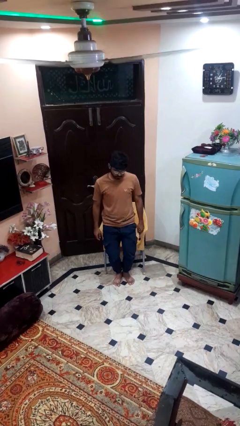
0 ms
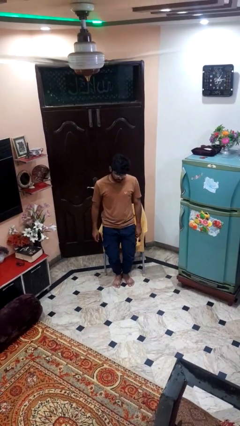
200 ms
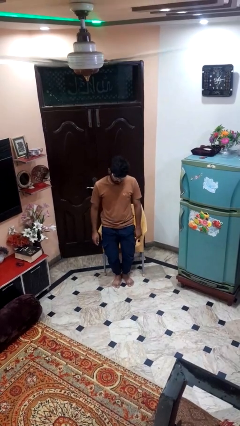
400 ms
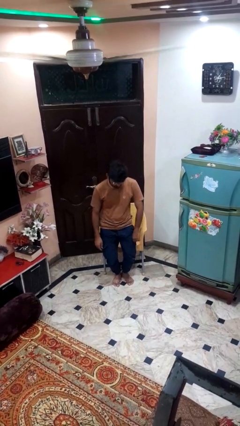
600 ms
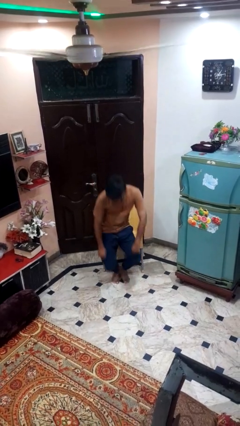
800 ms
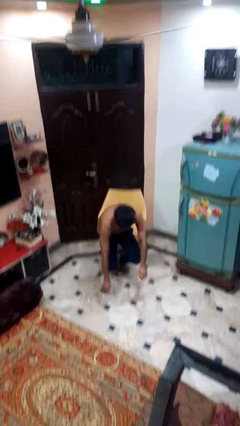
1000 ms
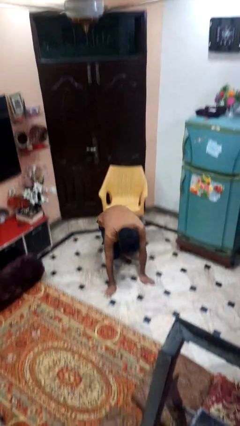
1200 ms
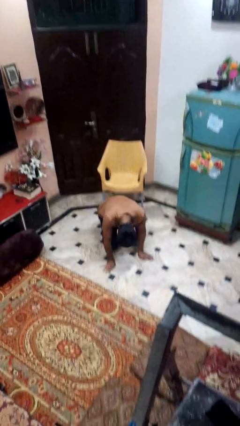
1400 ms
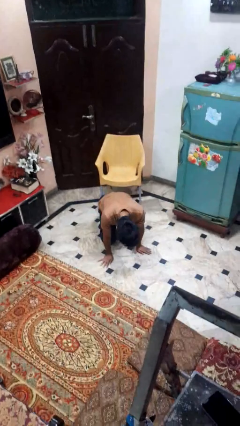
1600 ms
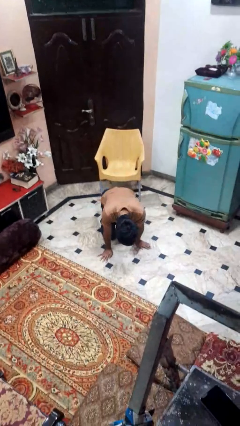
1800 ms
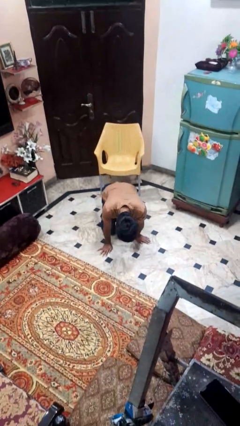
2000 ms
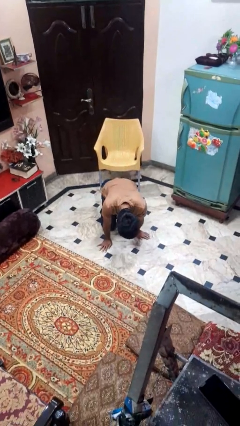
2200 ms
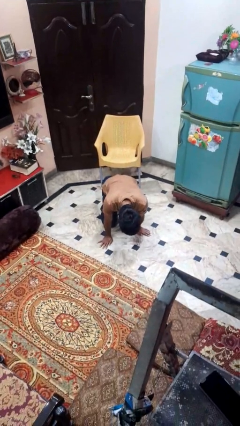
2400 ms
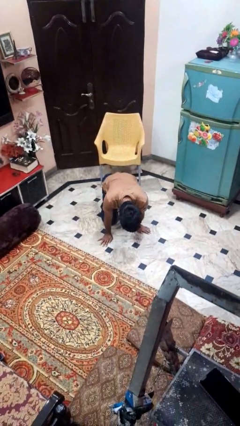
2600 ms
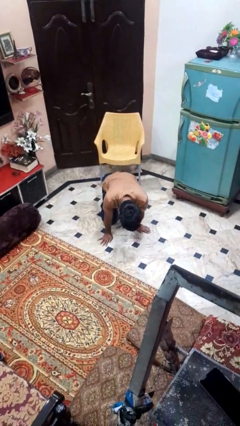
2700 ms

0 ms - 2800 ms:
person falls from chair

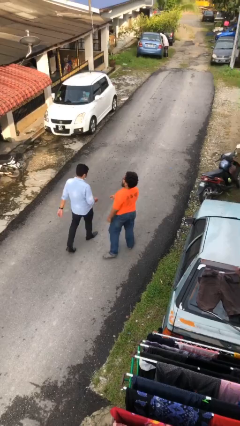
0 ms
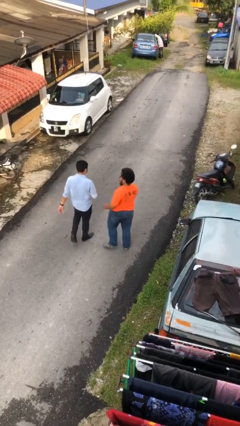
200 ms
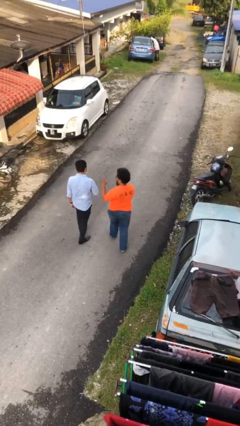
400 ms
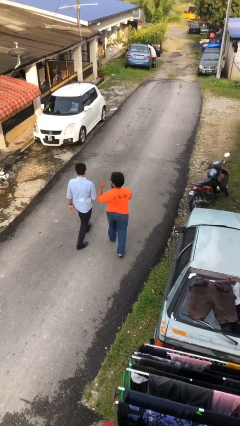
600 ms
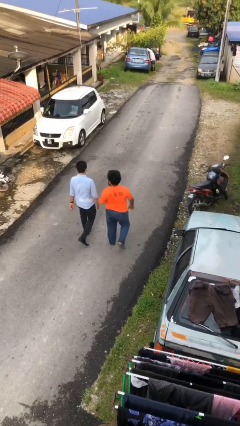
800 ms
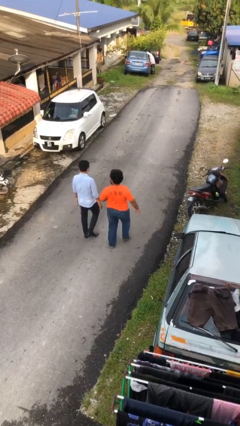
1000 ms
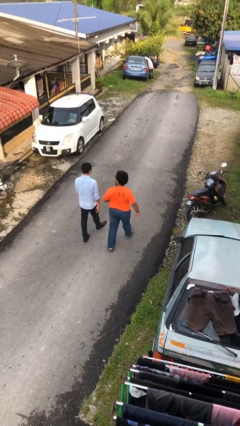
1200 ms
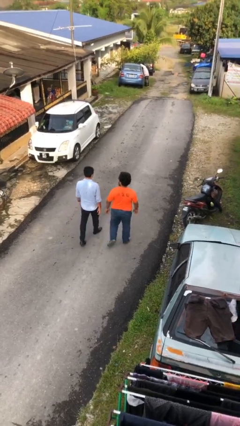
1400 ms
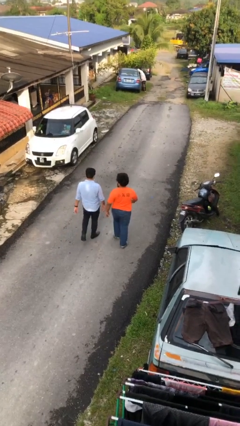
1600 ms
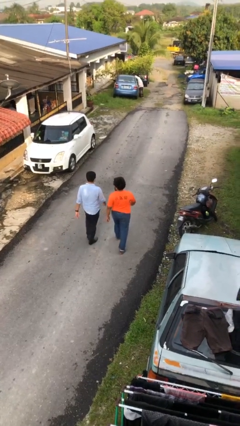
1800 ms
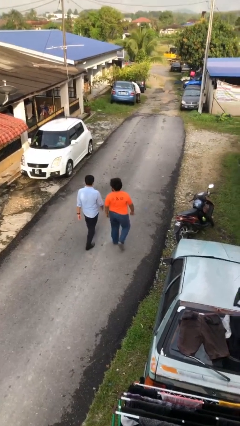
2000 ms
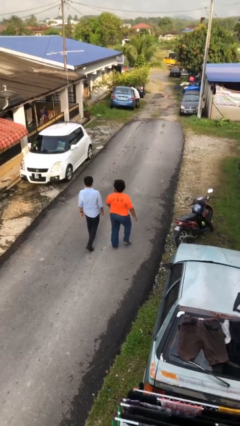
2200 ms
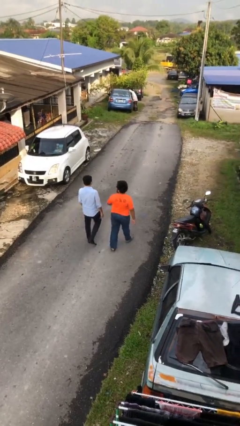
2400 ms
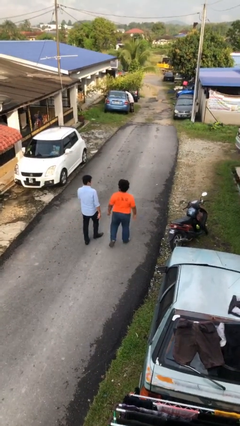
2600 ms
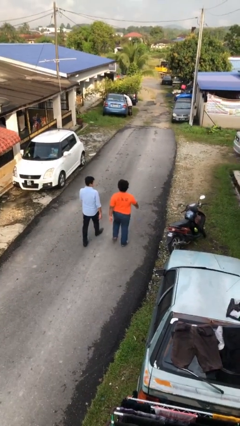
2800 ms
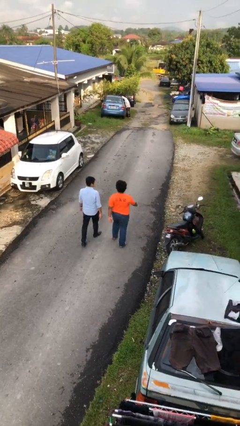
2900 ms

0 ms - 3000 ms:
person talks to person

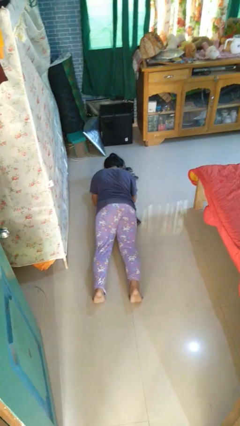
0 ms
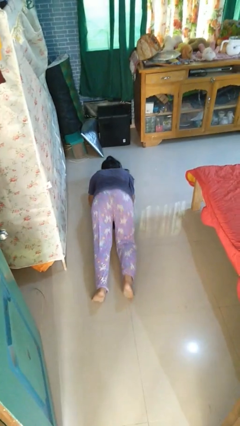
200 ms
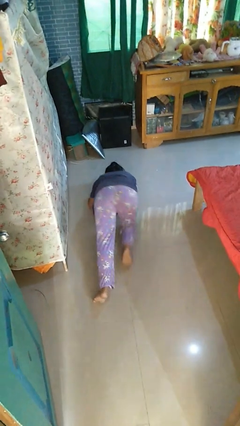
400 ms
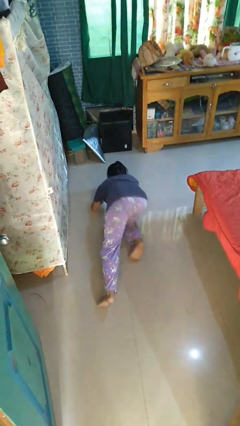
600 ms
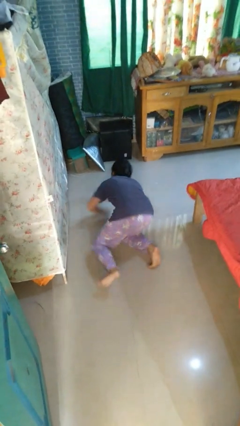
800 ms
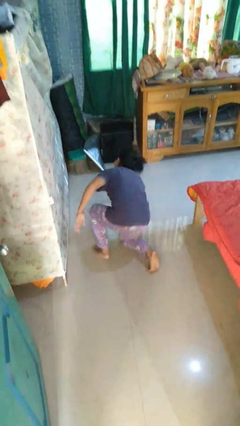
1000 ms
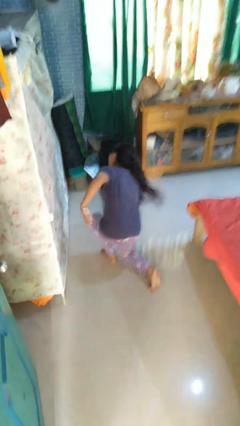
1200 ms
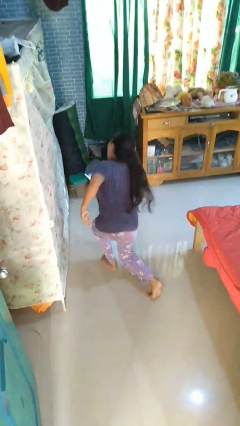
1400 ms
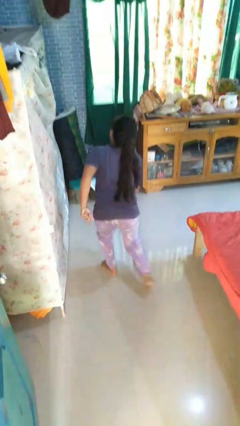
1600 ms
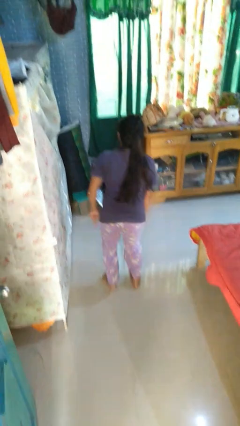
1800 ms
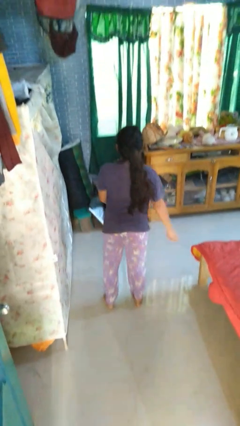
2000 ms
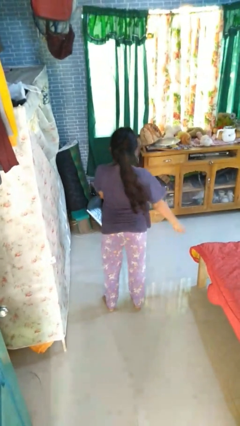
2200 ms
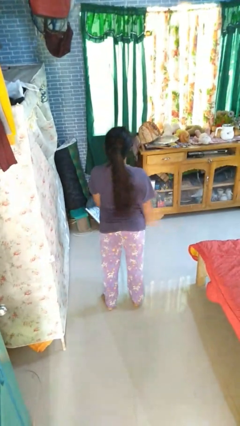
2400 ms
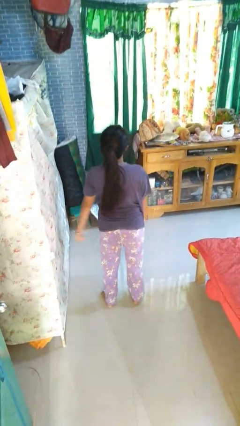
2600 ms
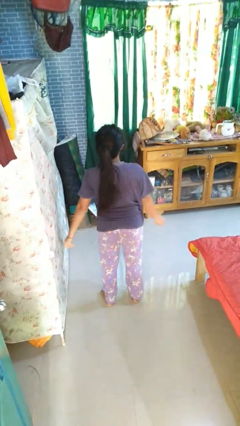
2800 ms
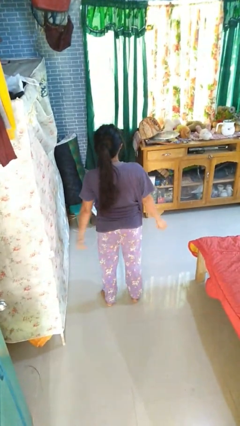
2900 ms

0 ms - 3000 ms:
person stands up from floor

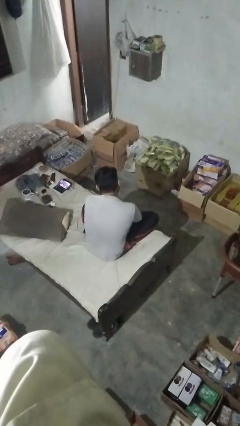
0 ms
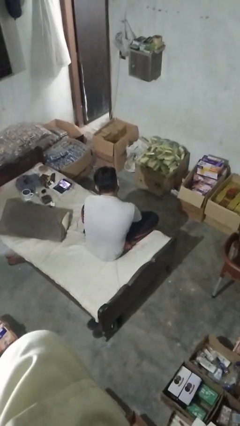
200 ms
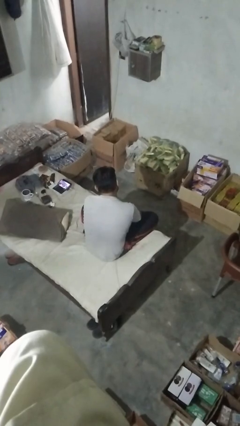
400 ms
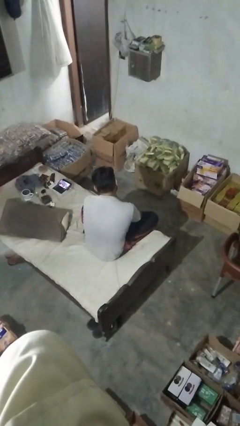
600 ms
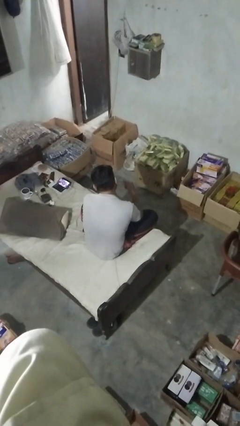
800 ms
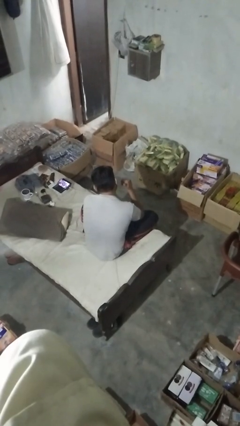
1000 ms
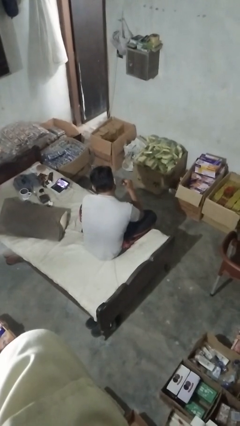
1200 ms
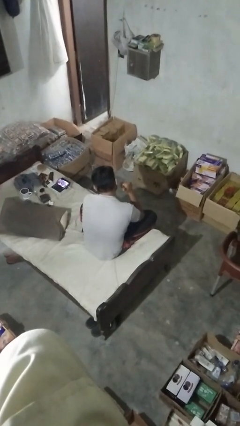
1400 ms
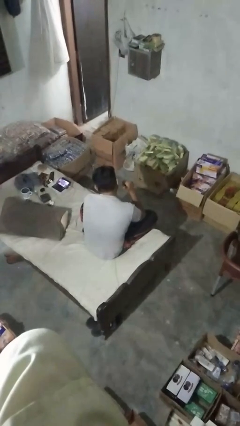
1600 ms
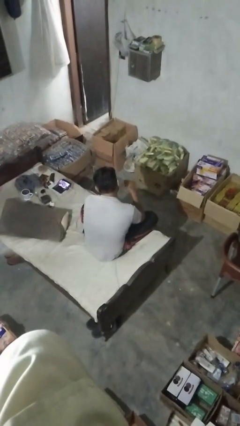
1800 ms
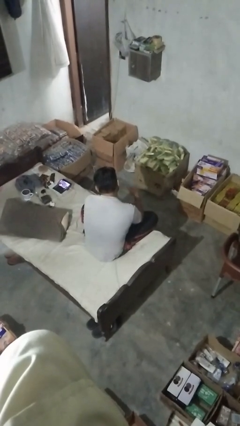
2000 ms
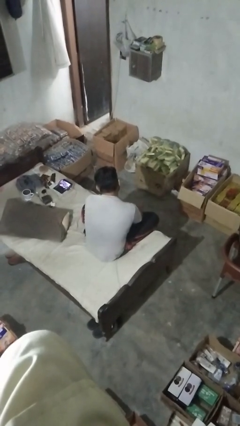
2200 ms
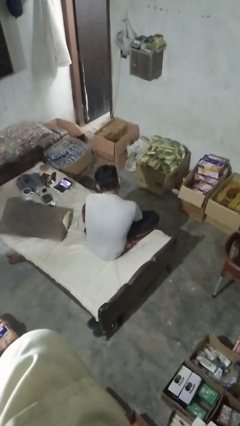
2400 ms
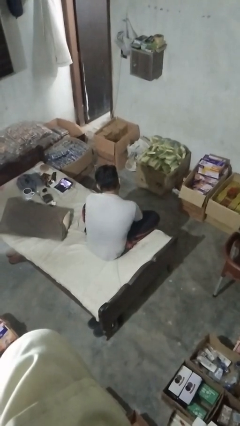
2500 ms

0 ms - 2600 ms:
person gestures behind me

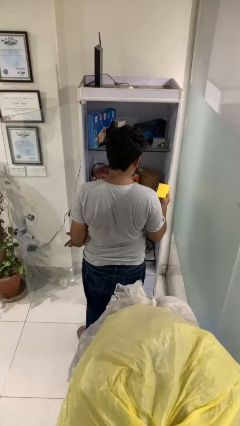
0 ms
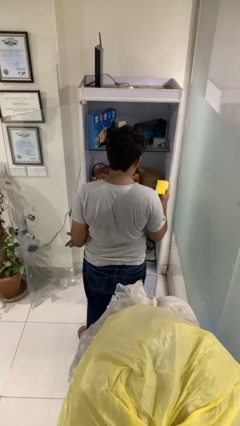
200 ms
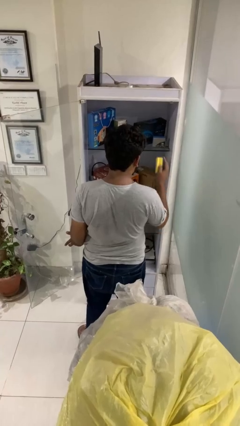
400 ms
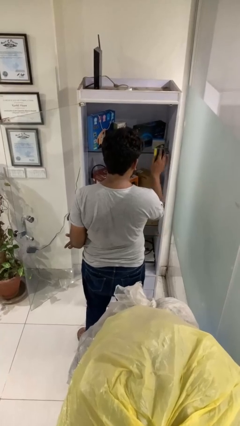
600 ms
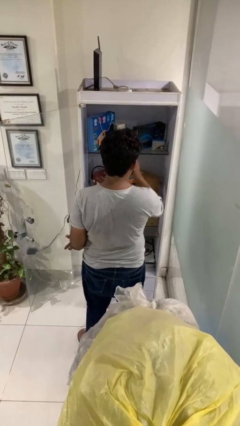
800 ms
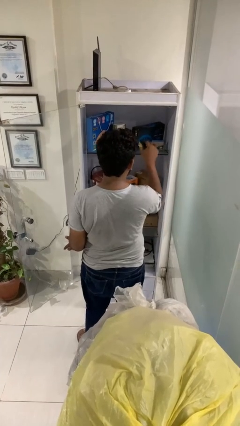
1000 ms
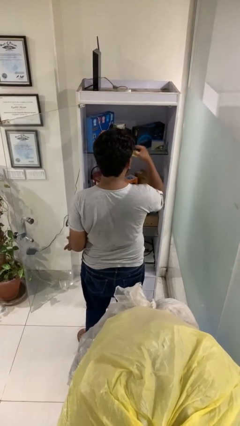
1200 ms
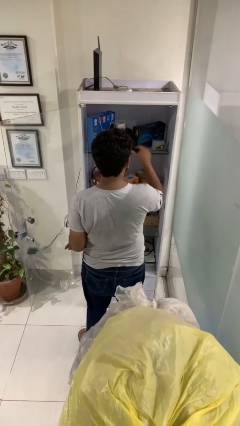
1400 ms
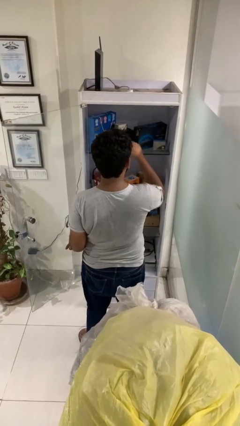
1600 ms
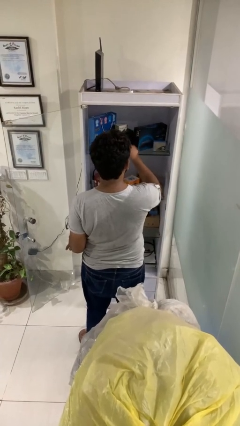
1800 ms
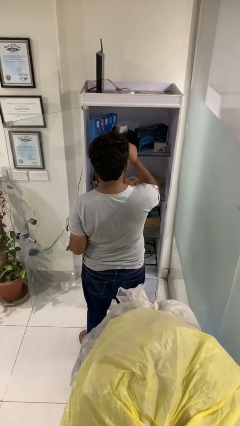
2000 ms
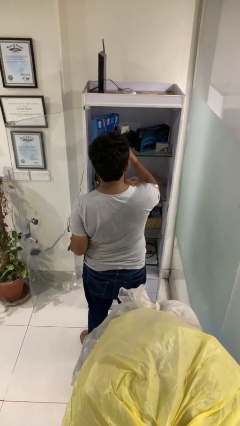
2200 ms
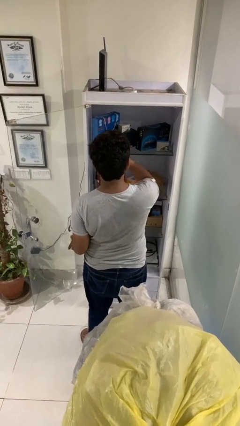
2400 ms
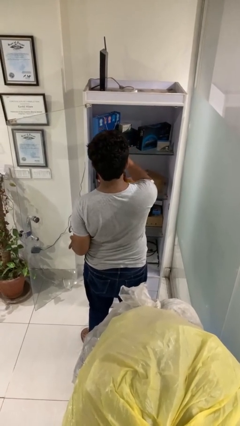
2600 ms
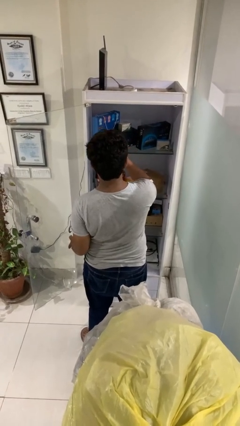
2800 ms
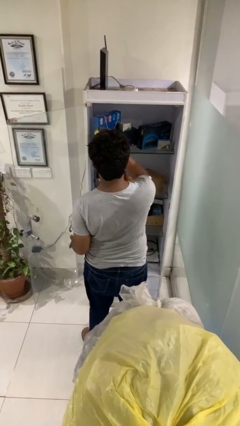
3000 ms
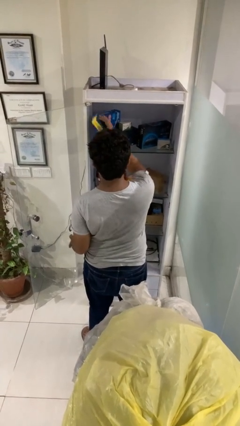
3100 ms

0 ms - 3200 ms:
person dusts furniture

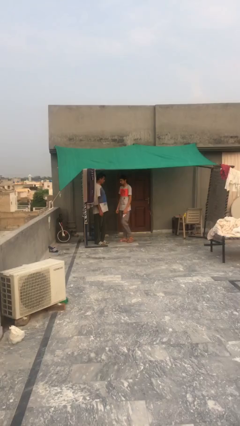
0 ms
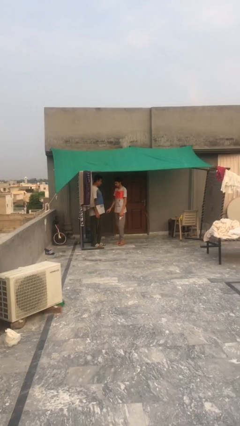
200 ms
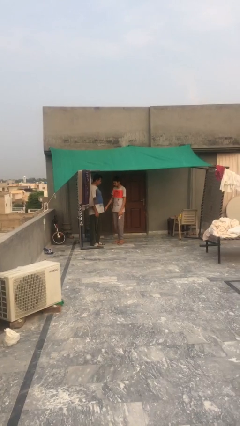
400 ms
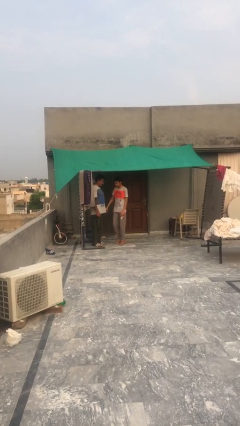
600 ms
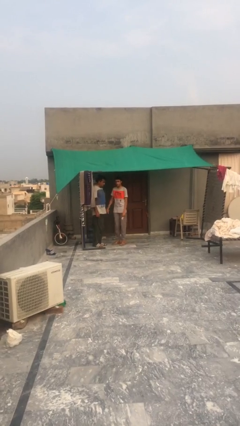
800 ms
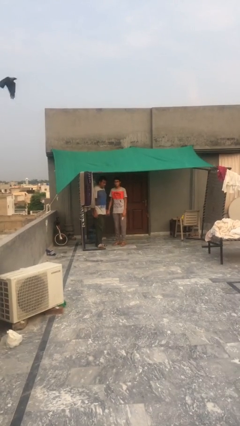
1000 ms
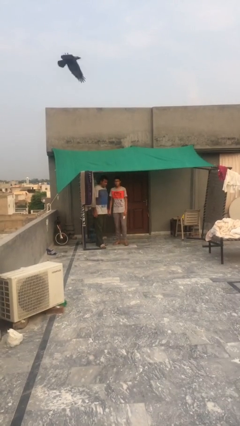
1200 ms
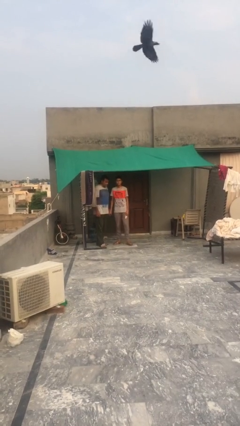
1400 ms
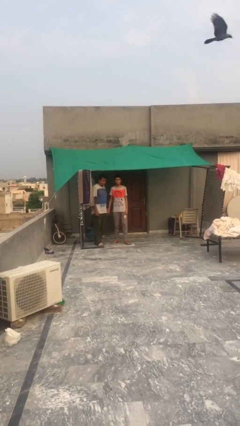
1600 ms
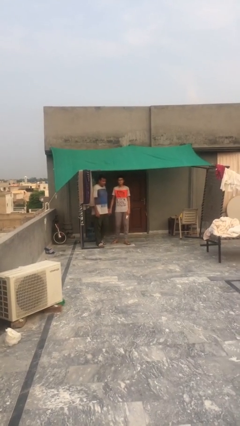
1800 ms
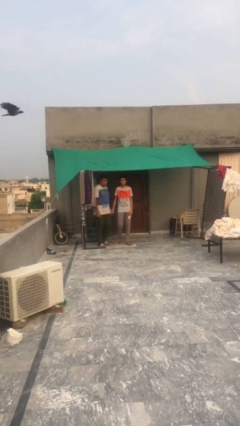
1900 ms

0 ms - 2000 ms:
person holds hand

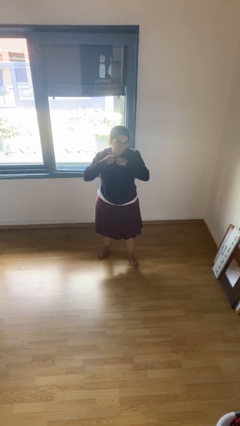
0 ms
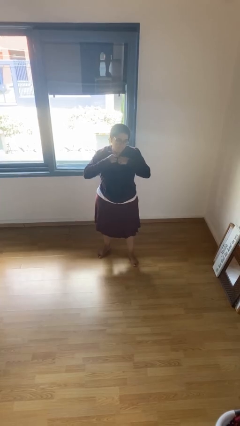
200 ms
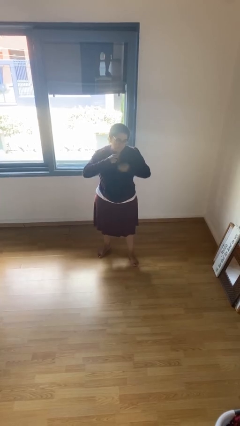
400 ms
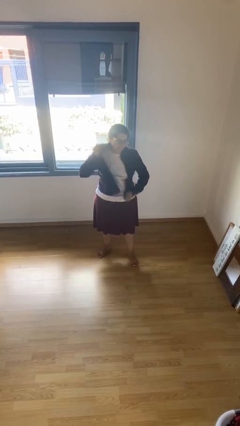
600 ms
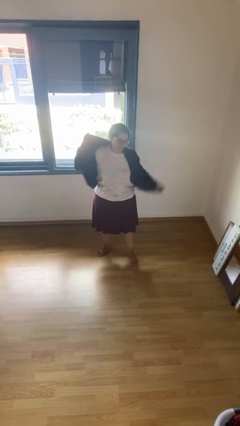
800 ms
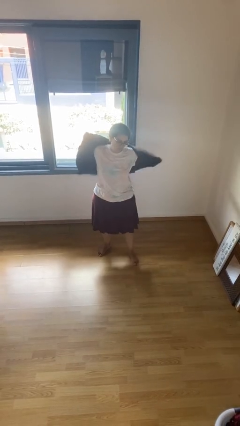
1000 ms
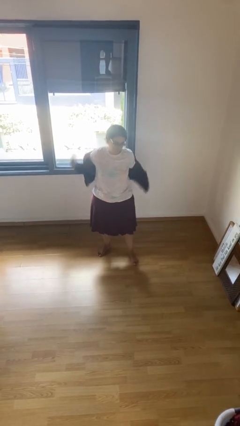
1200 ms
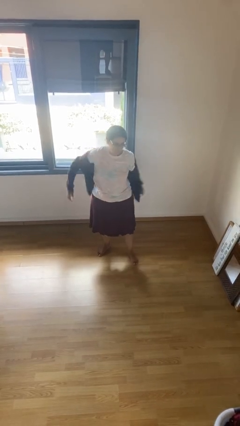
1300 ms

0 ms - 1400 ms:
person unzips jacket
